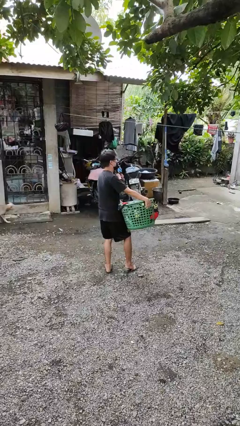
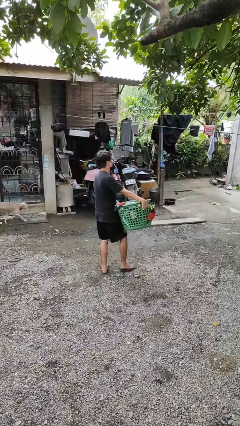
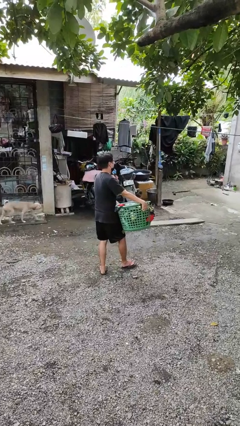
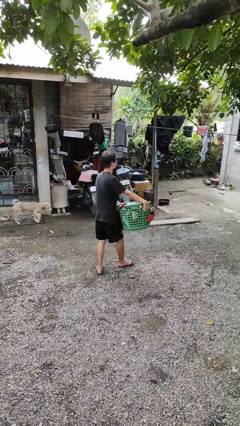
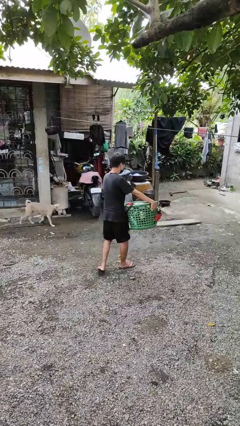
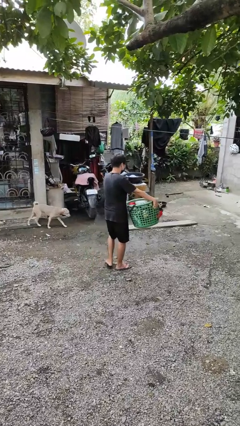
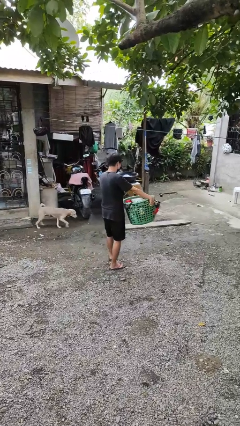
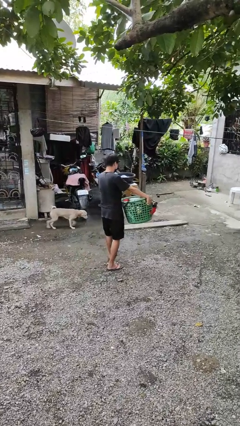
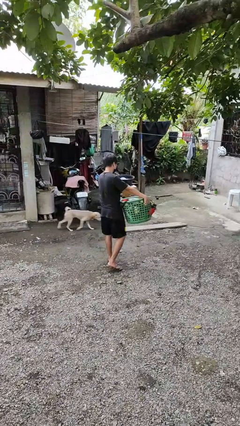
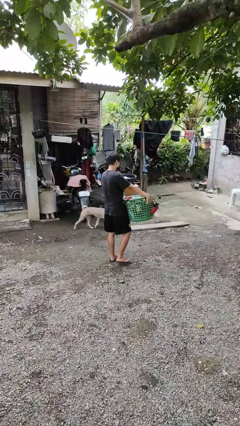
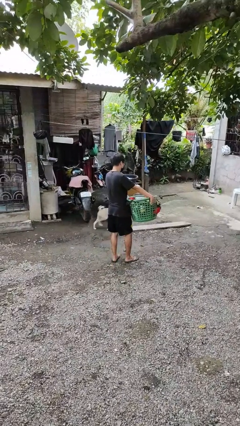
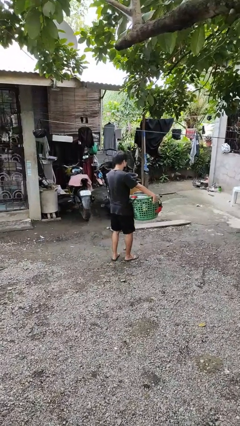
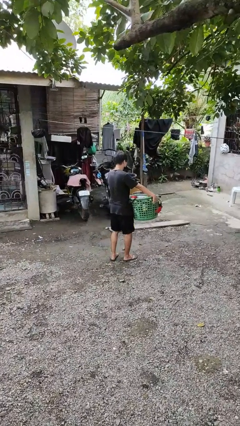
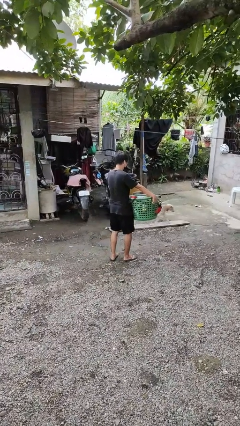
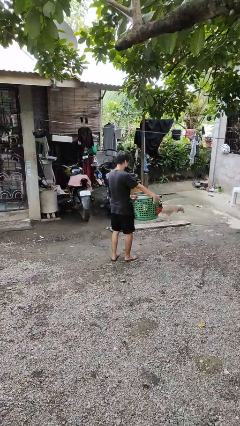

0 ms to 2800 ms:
person carries laundry basket

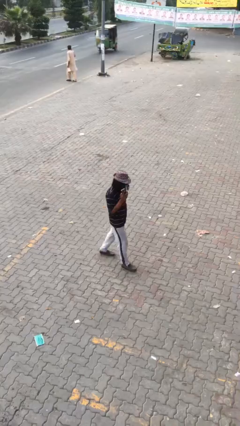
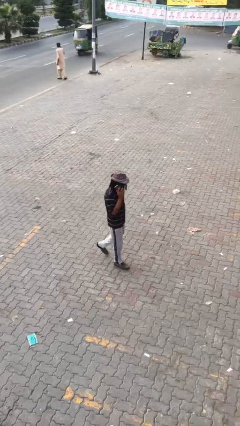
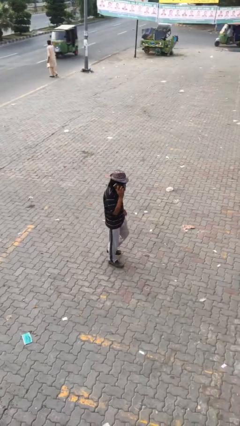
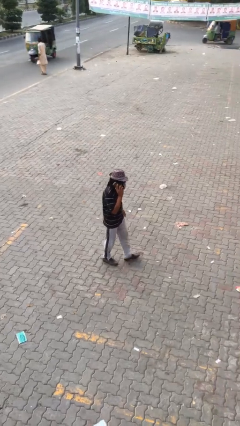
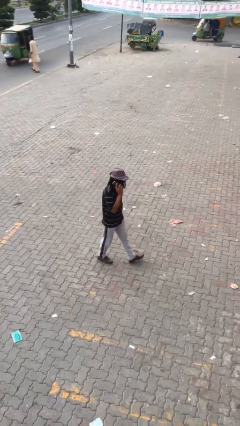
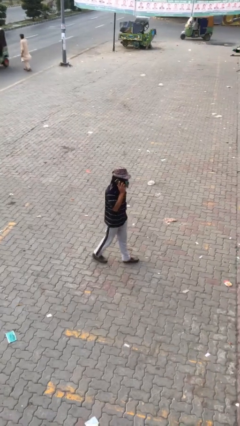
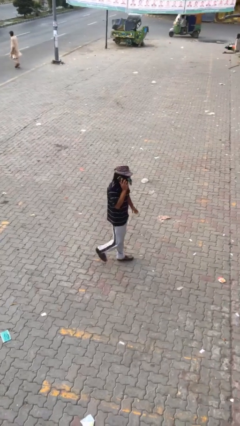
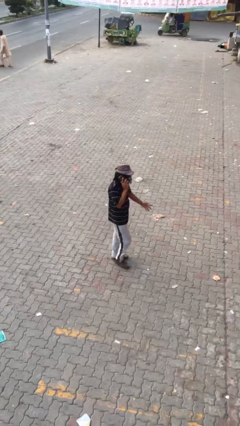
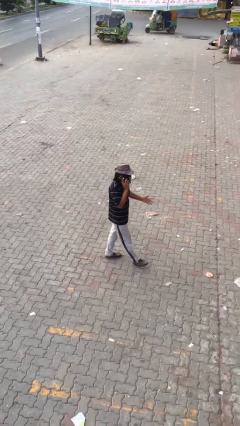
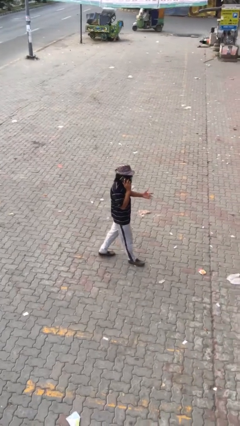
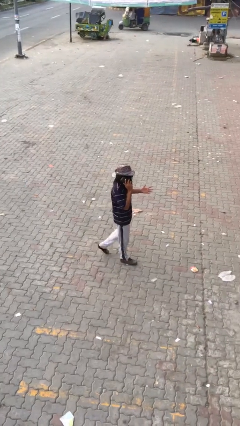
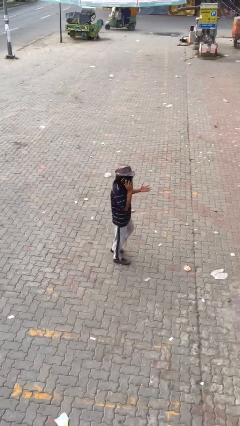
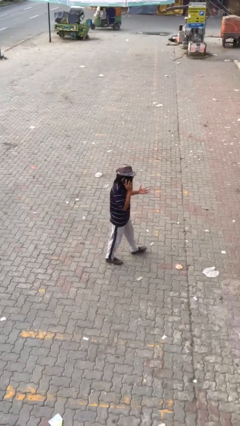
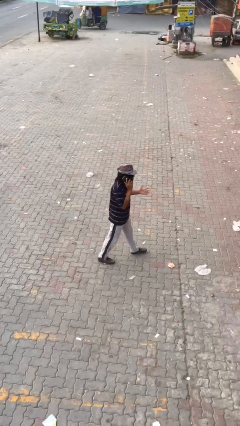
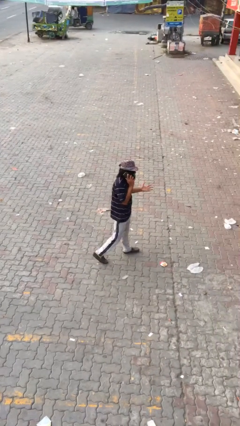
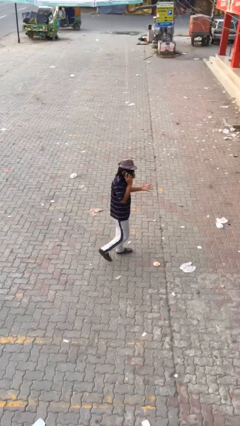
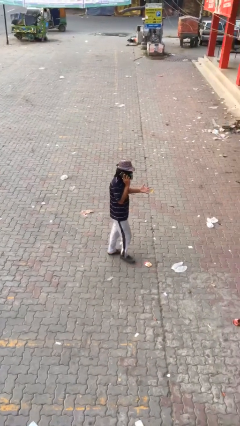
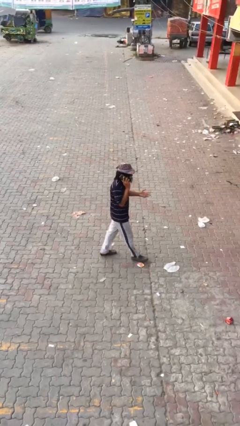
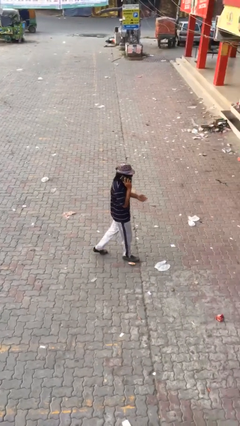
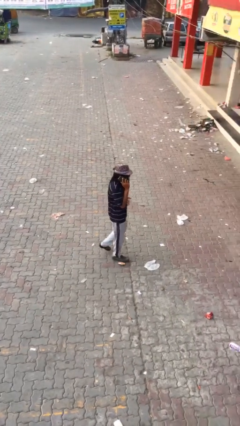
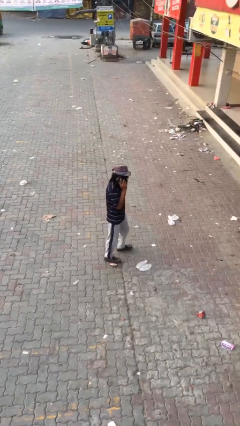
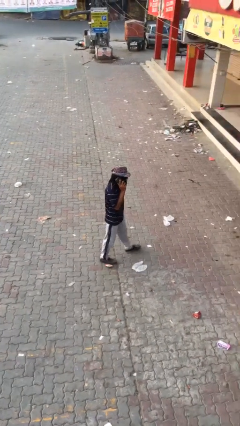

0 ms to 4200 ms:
person talks on phone

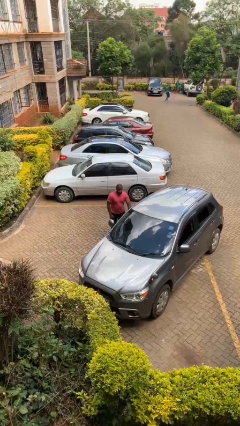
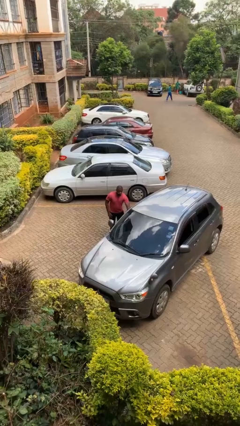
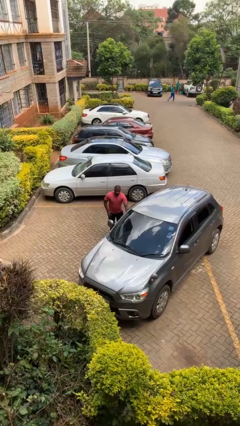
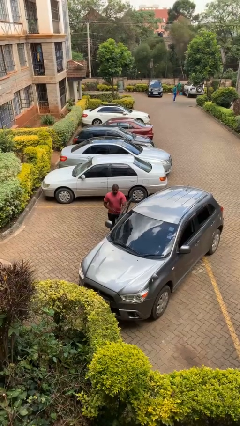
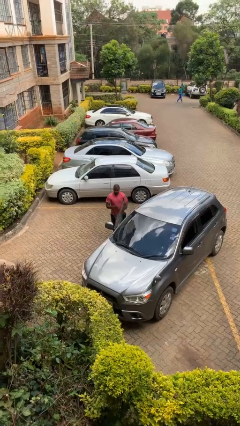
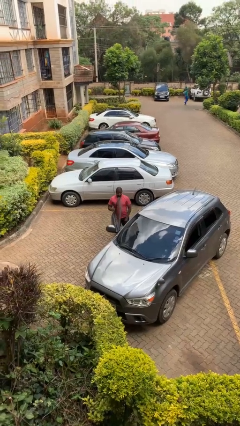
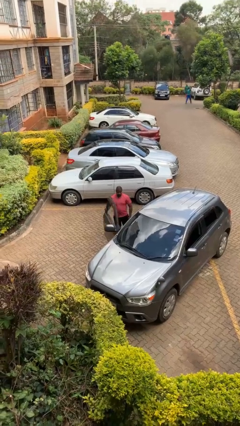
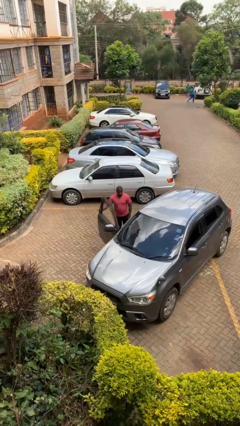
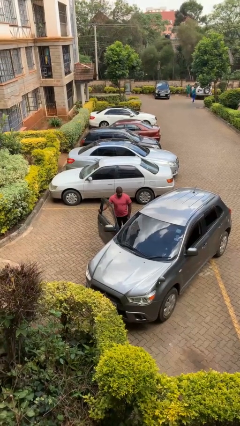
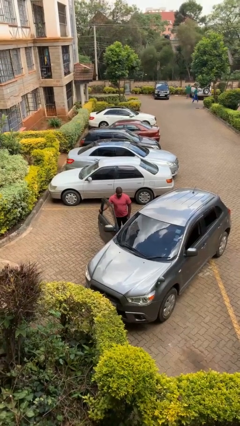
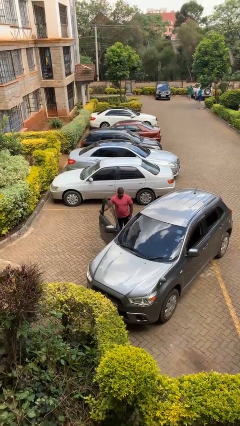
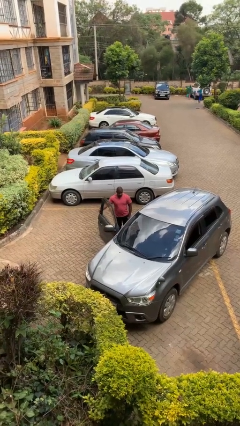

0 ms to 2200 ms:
person opens car door

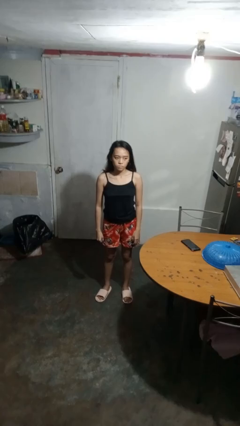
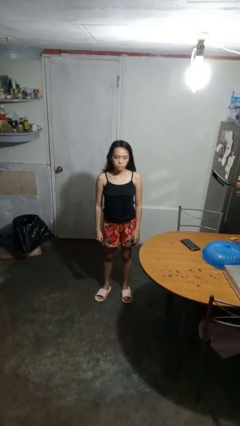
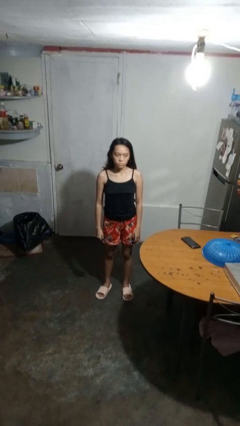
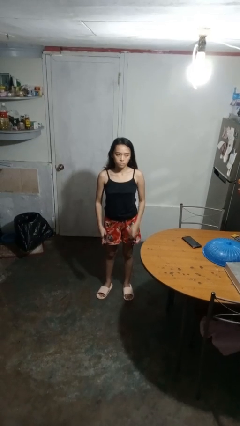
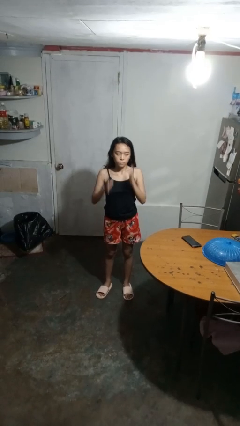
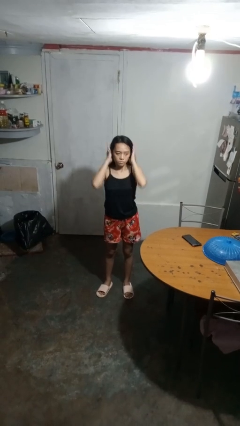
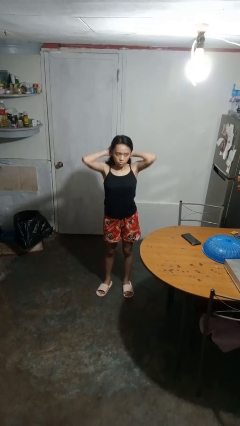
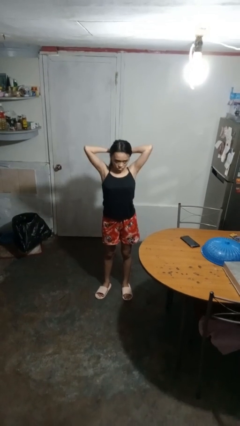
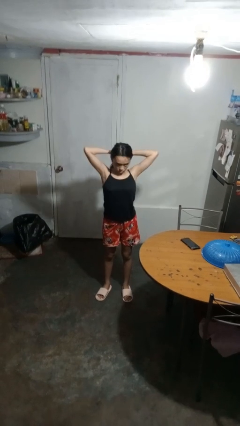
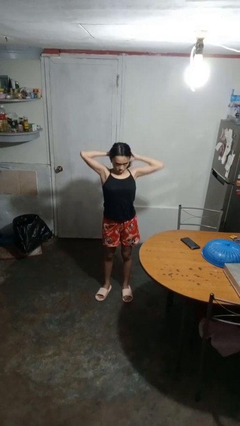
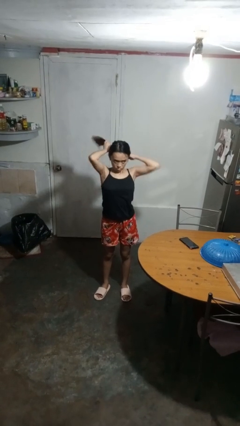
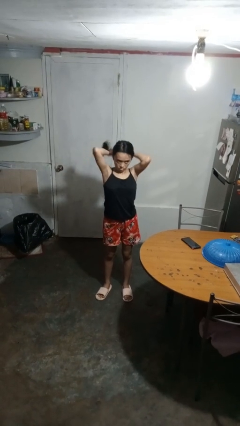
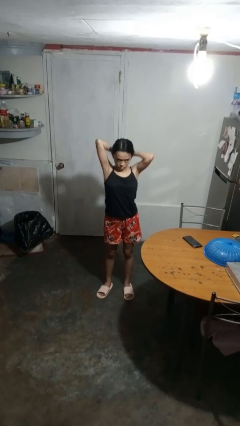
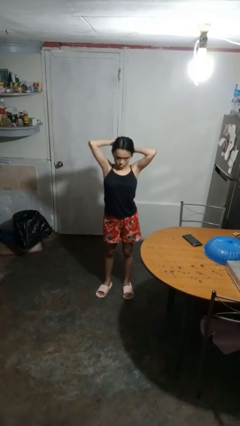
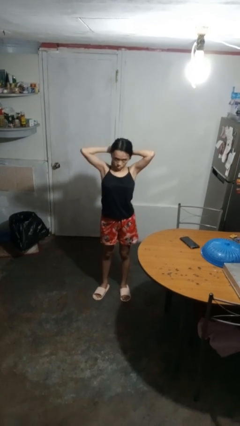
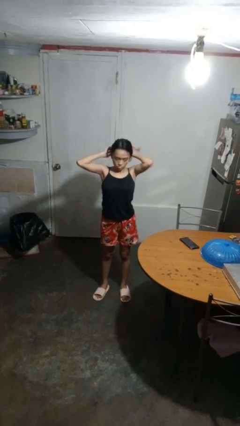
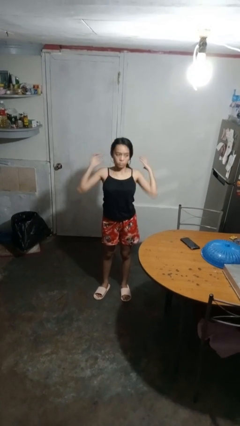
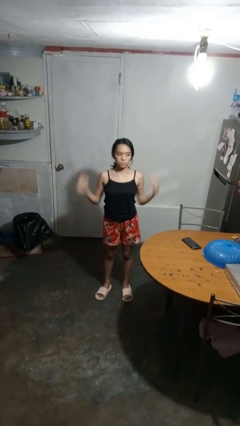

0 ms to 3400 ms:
person puts hair in ponytail

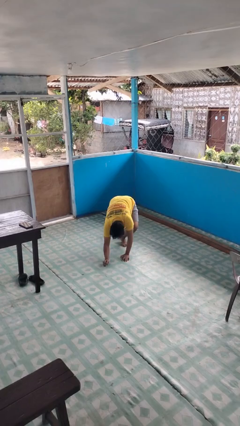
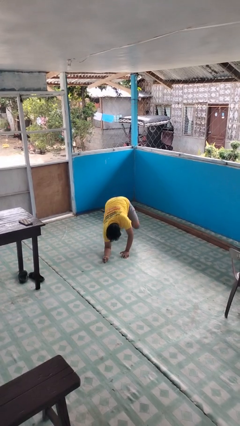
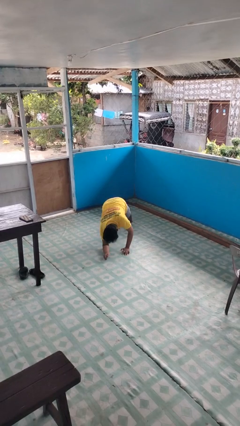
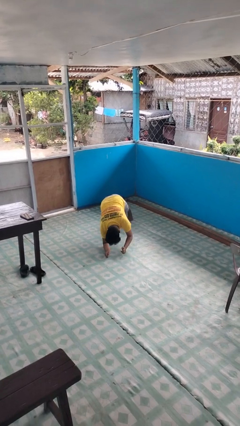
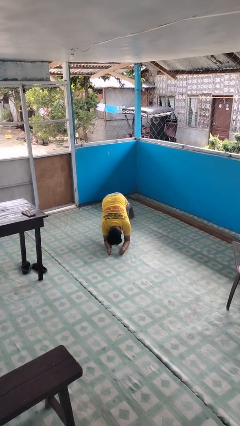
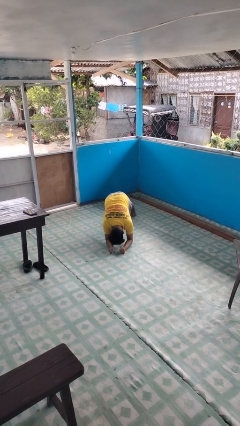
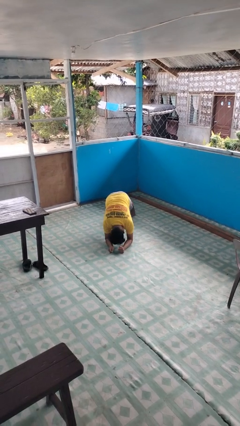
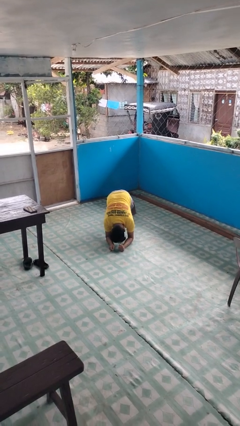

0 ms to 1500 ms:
person exercises with plank

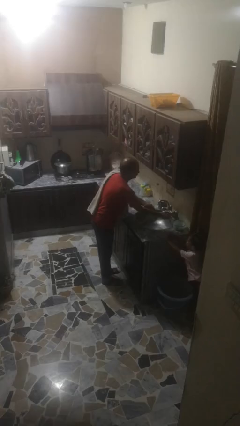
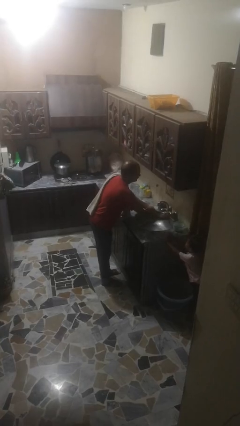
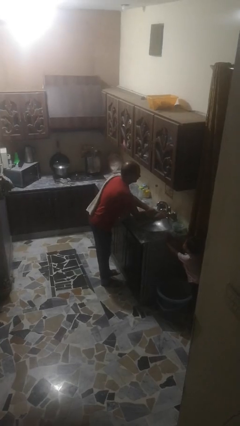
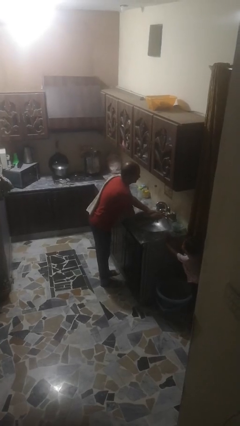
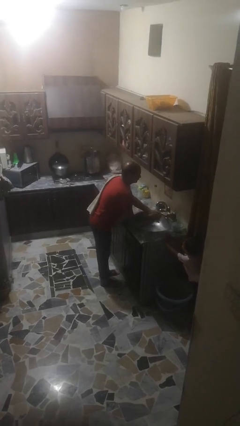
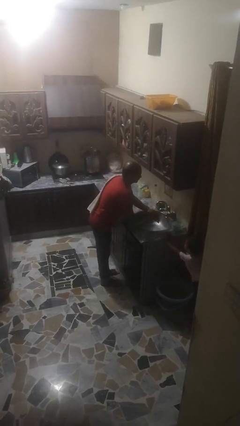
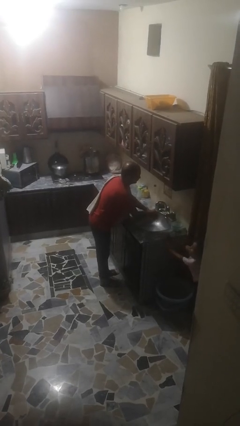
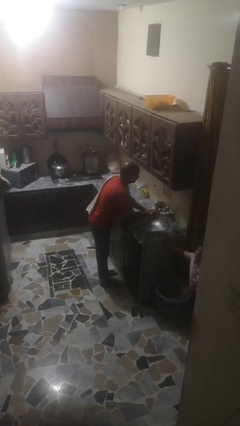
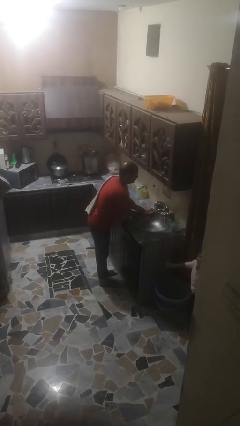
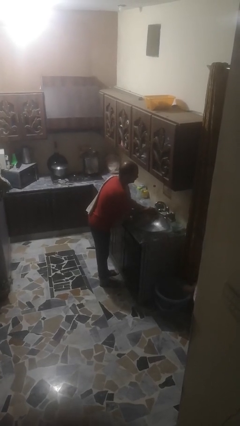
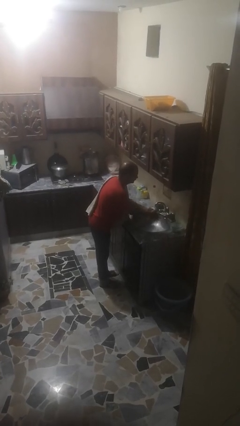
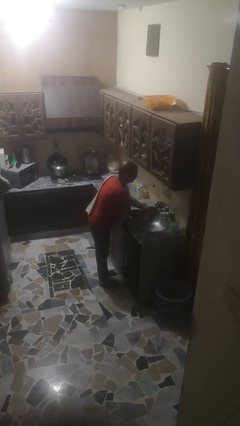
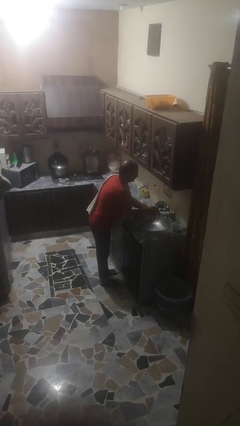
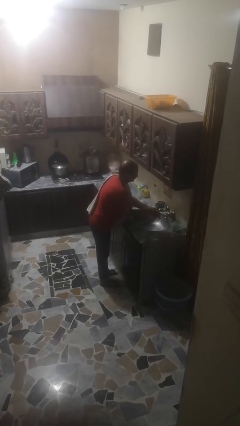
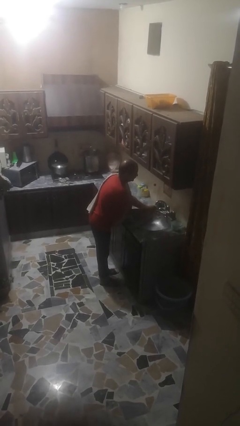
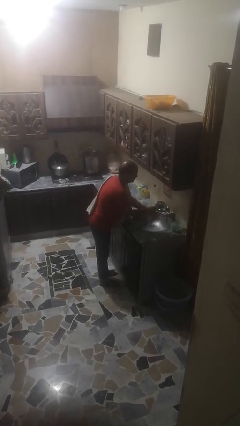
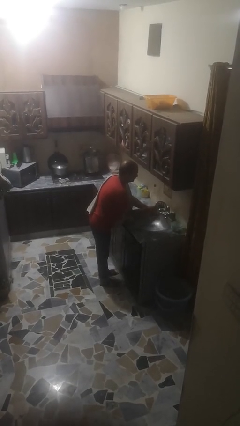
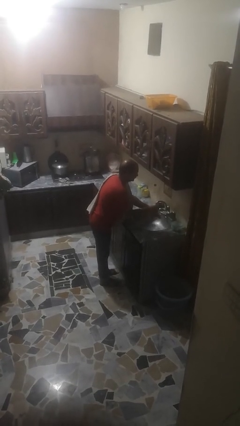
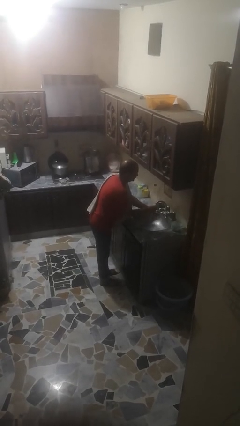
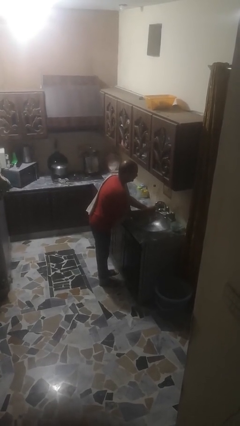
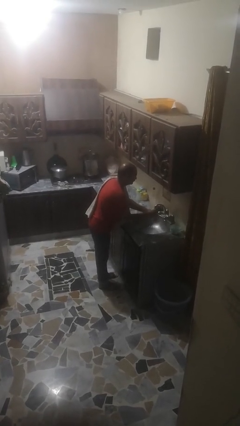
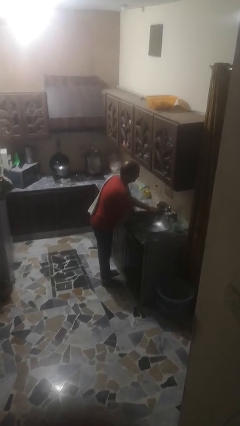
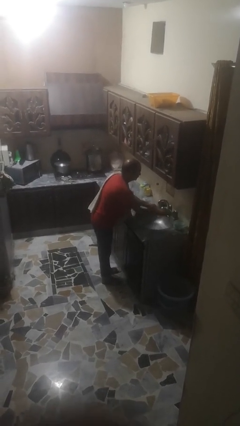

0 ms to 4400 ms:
person washes hands
